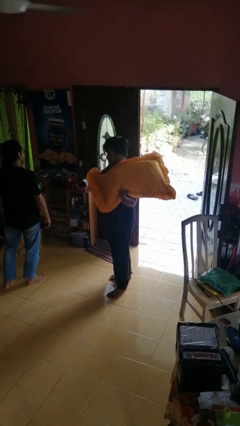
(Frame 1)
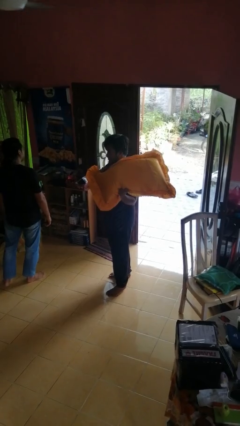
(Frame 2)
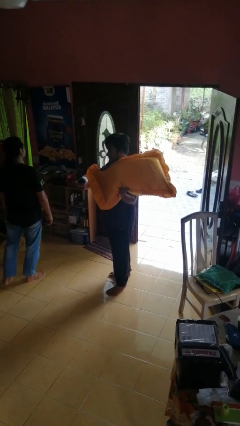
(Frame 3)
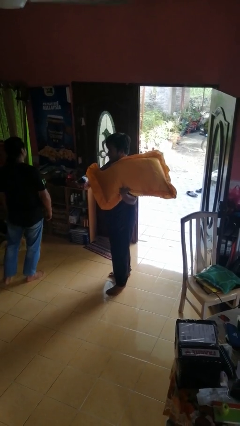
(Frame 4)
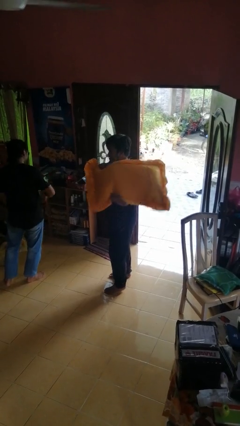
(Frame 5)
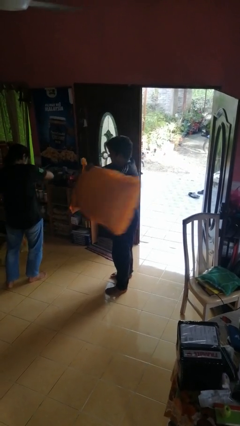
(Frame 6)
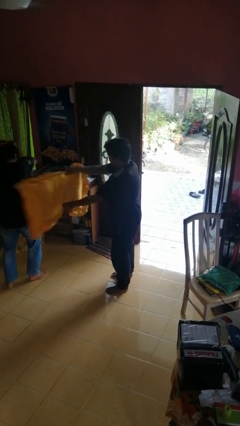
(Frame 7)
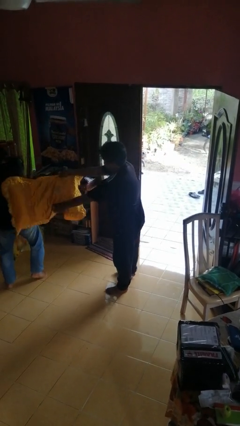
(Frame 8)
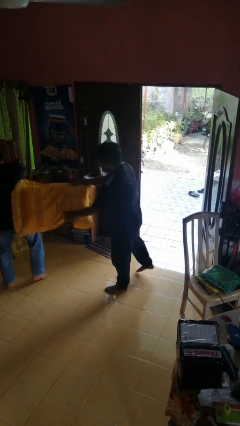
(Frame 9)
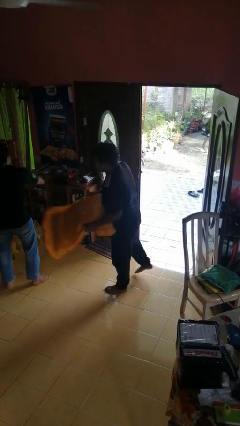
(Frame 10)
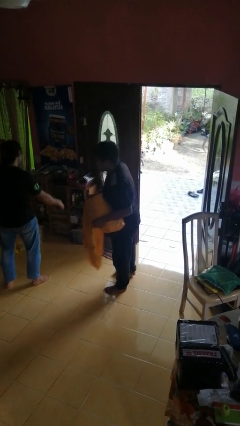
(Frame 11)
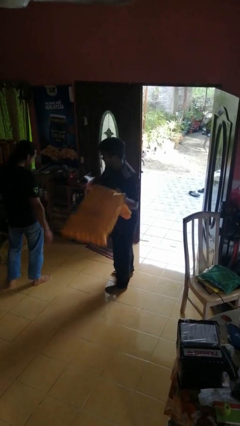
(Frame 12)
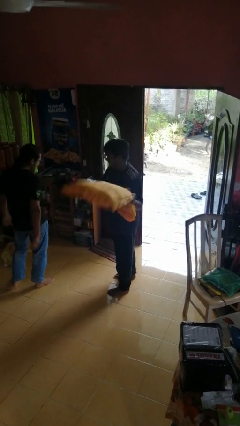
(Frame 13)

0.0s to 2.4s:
person hits person with pillow

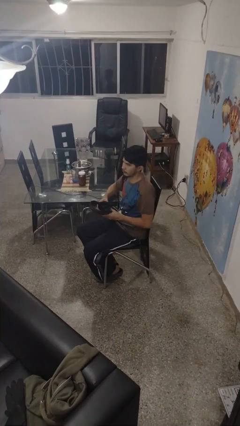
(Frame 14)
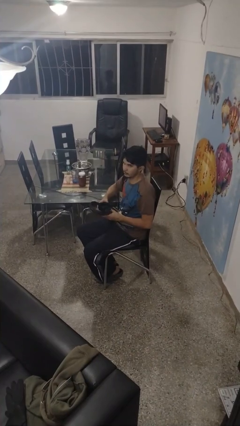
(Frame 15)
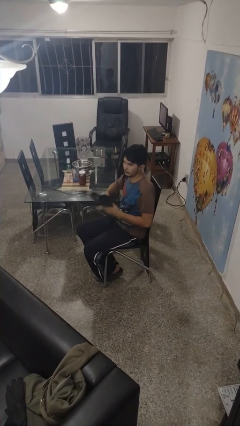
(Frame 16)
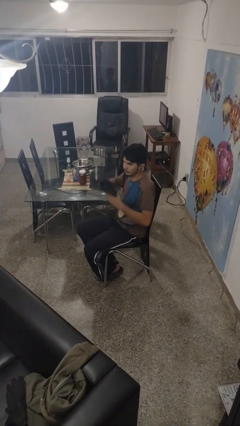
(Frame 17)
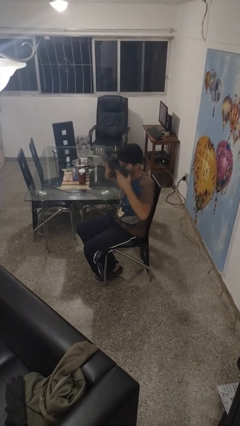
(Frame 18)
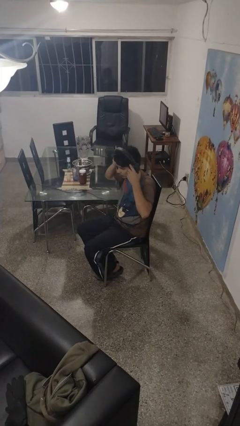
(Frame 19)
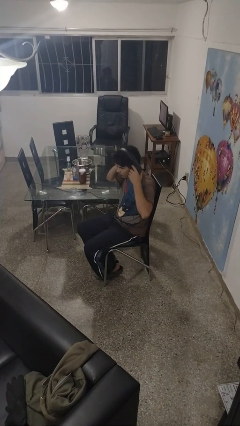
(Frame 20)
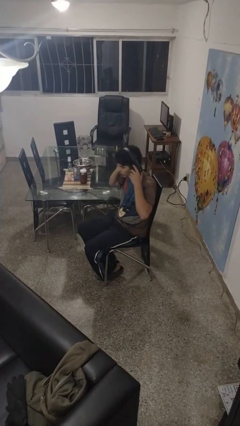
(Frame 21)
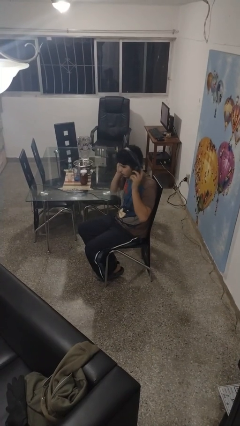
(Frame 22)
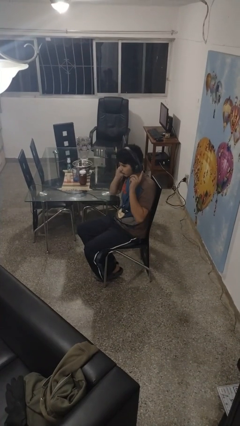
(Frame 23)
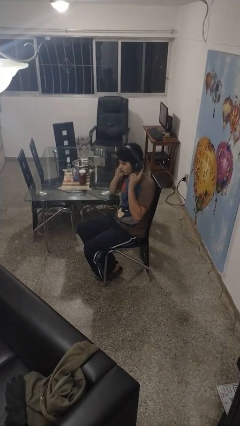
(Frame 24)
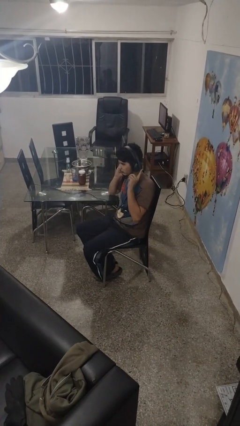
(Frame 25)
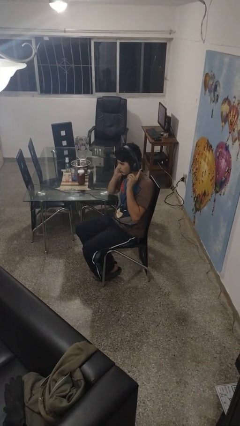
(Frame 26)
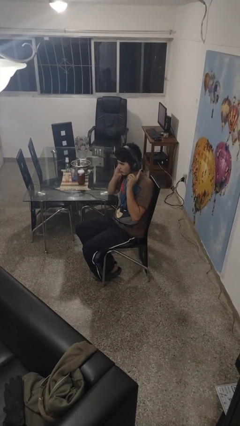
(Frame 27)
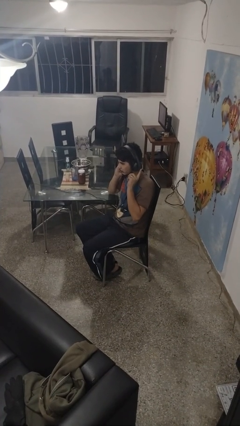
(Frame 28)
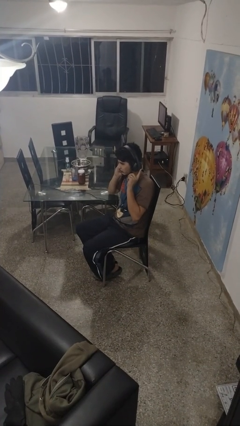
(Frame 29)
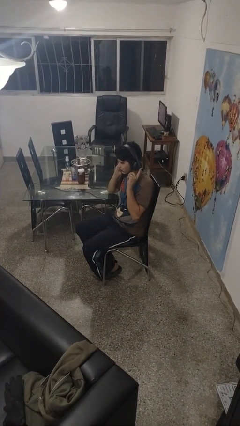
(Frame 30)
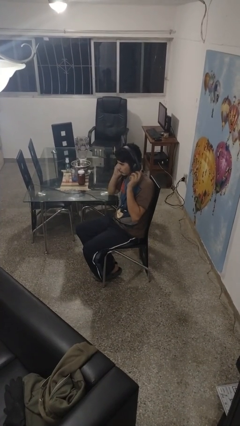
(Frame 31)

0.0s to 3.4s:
person puts on headphones

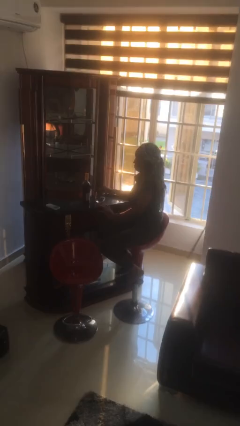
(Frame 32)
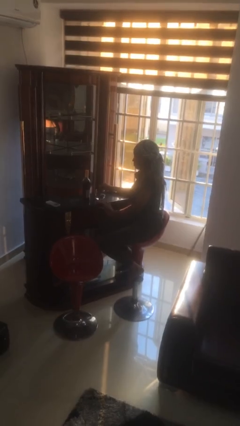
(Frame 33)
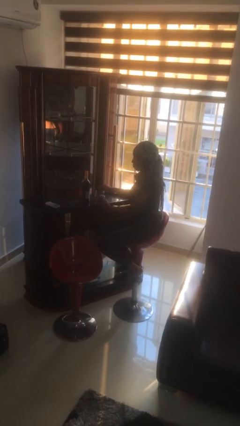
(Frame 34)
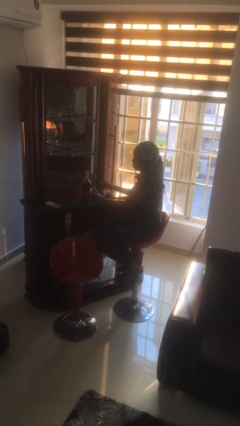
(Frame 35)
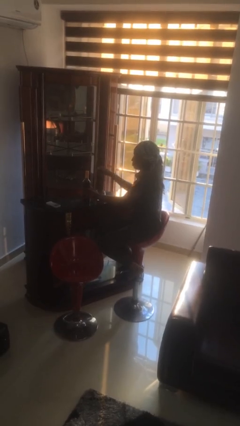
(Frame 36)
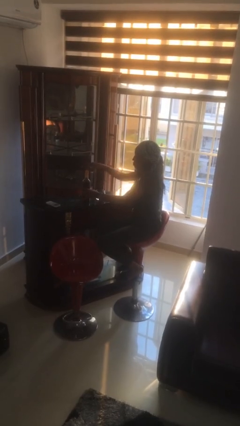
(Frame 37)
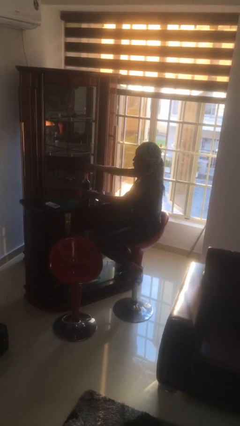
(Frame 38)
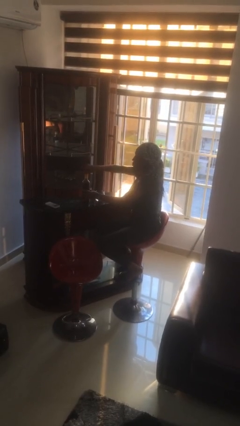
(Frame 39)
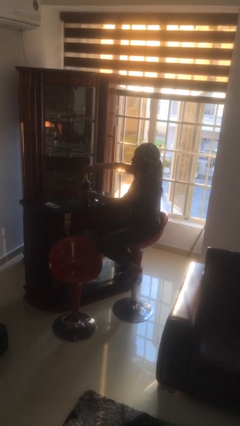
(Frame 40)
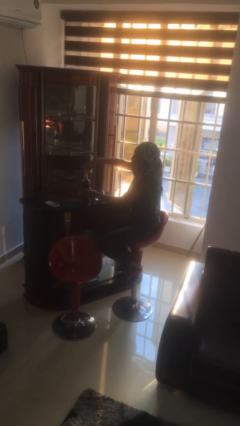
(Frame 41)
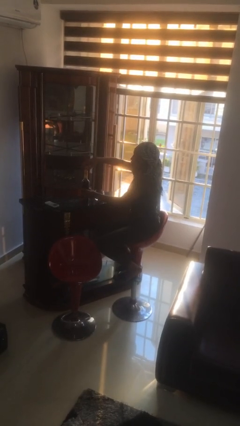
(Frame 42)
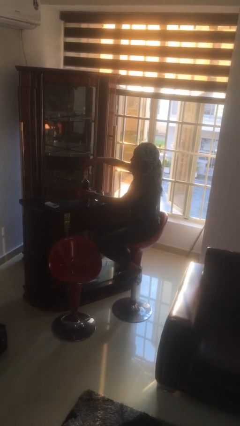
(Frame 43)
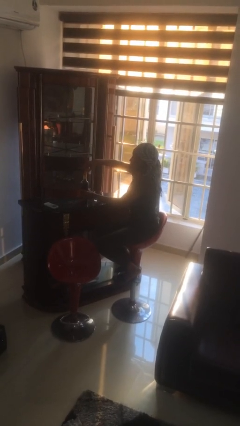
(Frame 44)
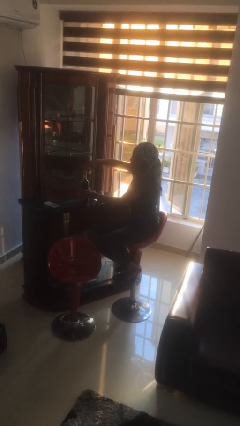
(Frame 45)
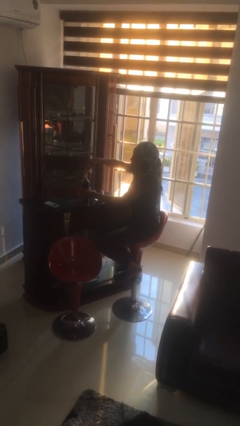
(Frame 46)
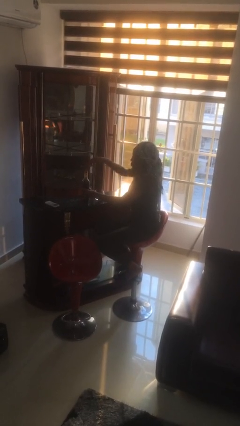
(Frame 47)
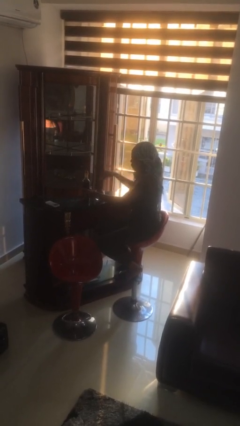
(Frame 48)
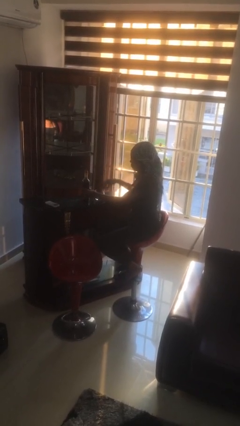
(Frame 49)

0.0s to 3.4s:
person unscrews lid from bottle

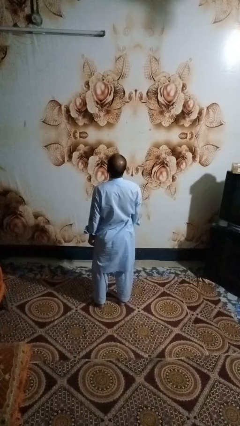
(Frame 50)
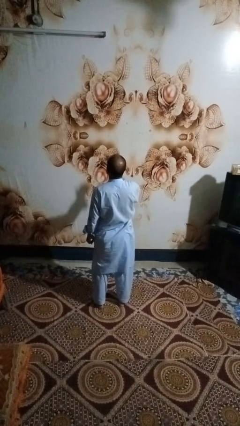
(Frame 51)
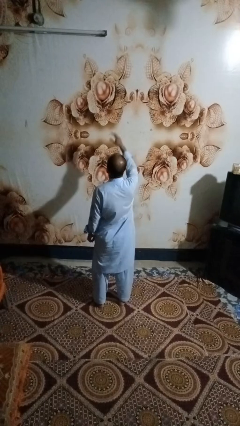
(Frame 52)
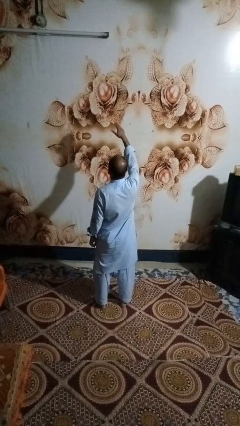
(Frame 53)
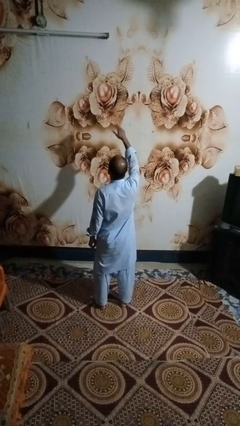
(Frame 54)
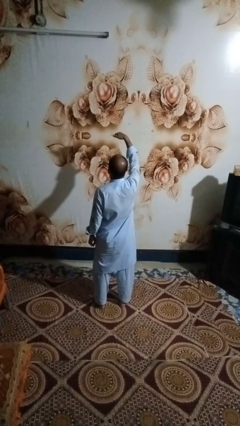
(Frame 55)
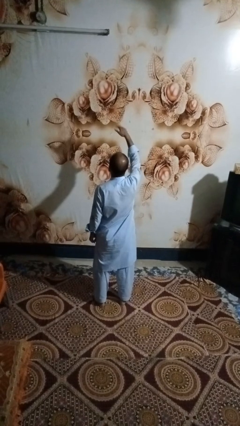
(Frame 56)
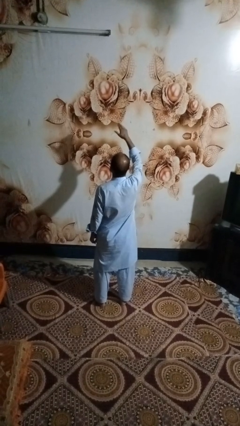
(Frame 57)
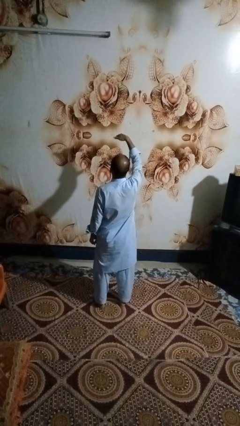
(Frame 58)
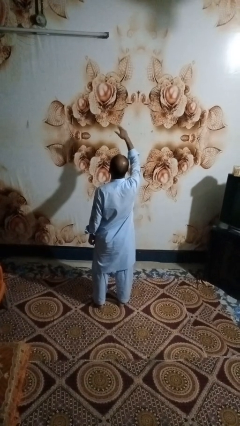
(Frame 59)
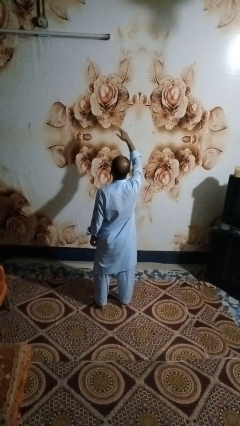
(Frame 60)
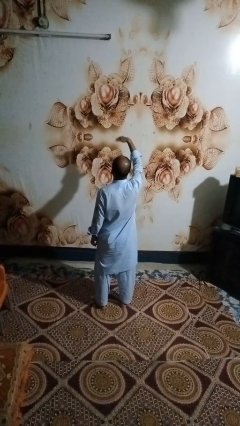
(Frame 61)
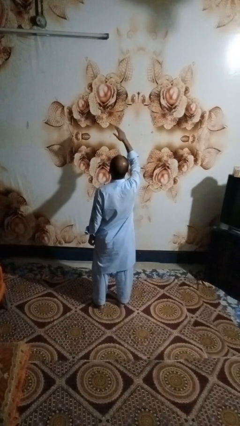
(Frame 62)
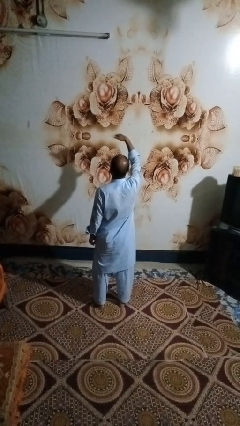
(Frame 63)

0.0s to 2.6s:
person gestures come here

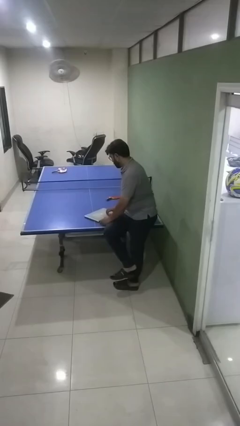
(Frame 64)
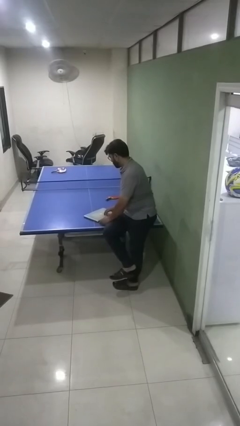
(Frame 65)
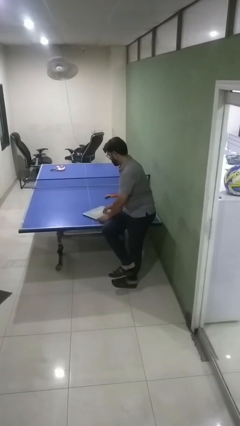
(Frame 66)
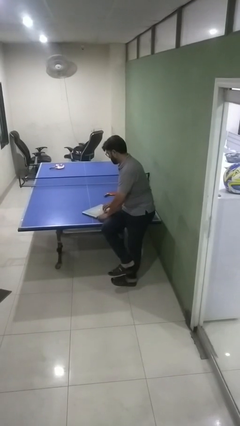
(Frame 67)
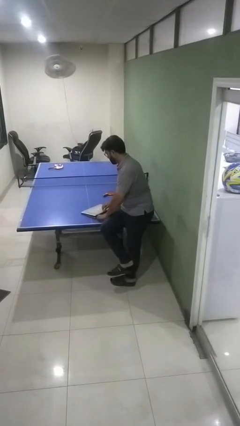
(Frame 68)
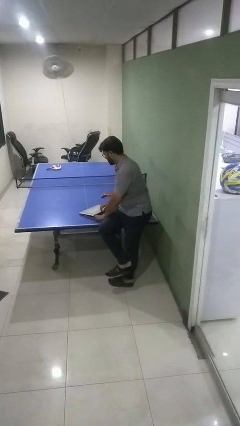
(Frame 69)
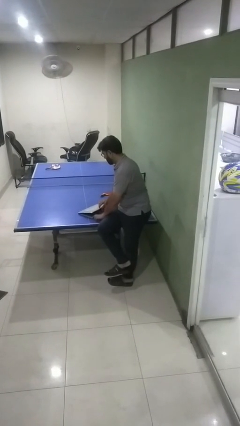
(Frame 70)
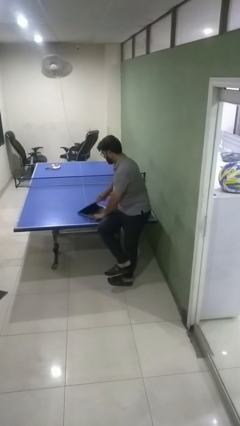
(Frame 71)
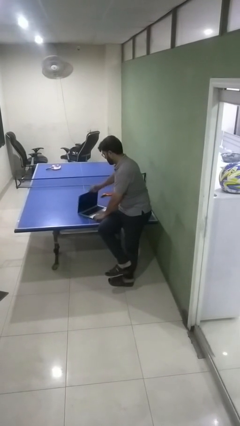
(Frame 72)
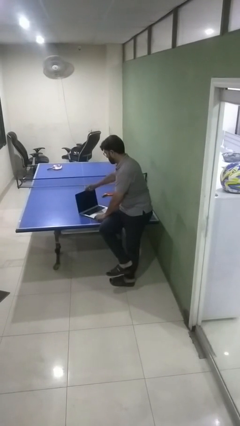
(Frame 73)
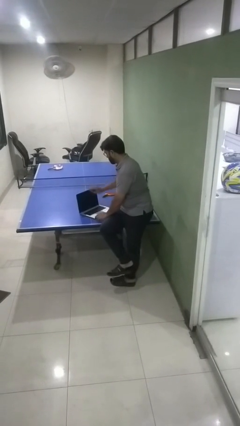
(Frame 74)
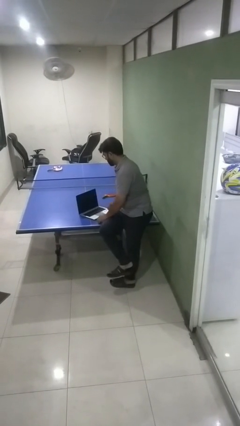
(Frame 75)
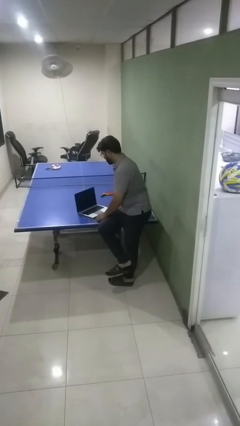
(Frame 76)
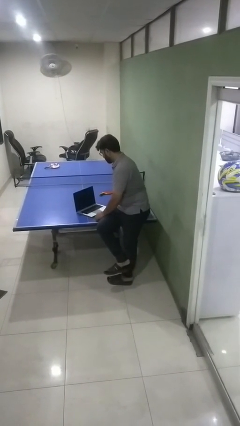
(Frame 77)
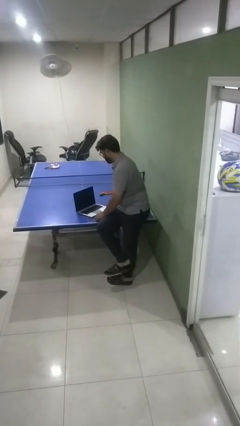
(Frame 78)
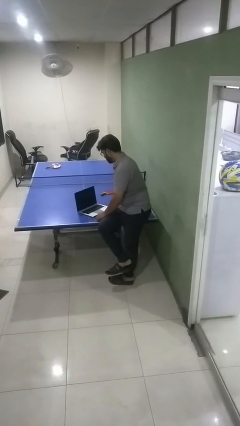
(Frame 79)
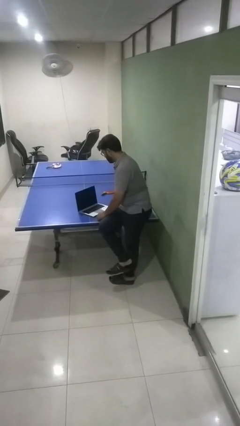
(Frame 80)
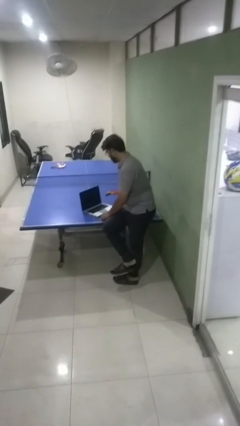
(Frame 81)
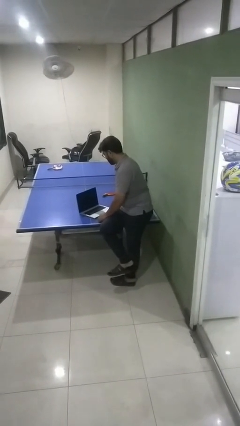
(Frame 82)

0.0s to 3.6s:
person opens laptop

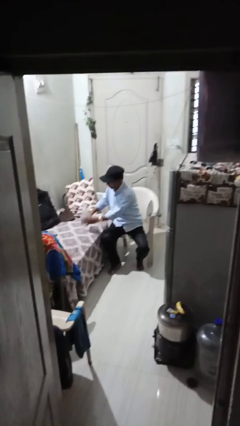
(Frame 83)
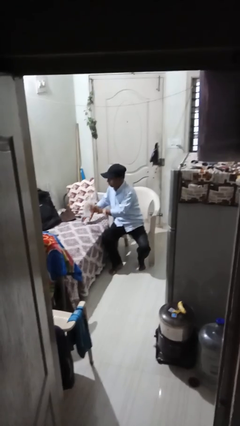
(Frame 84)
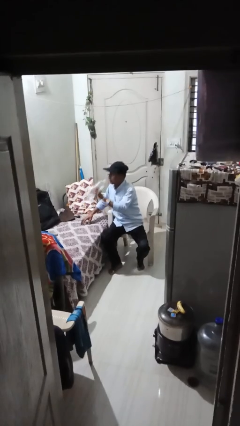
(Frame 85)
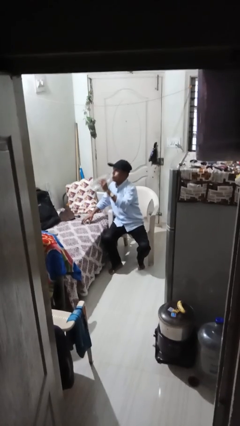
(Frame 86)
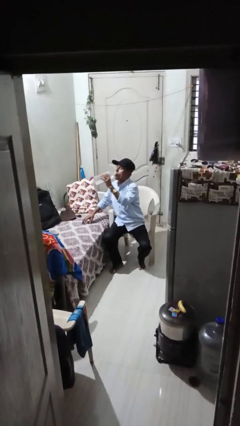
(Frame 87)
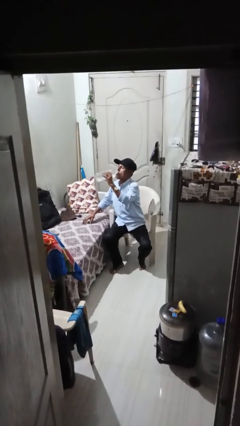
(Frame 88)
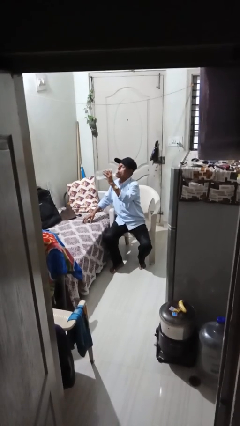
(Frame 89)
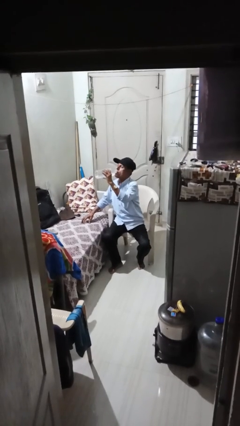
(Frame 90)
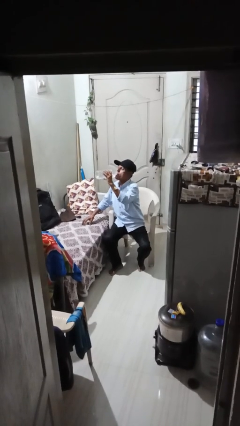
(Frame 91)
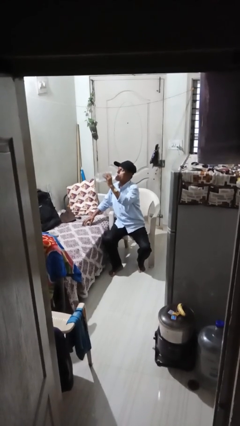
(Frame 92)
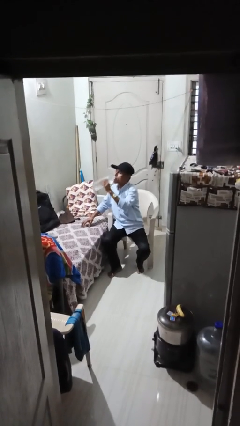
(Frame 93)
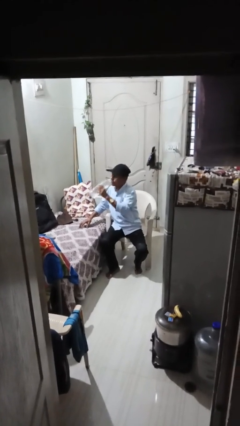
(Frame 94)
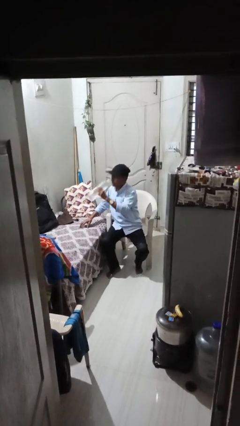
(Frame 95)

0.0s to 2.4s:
person drinks from bottle
